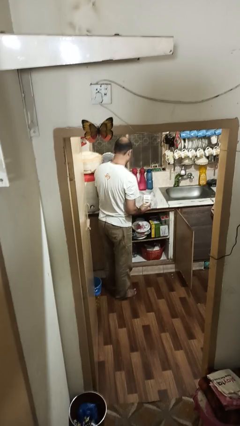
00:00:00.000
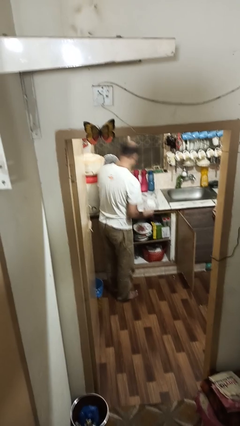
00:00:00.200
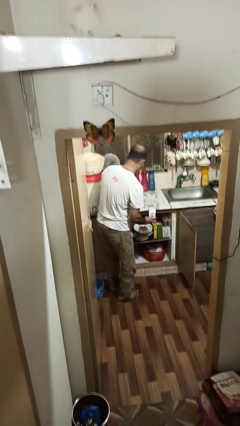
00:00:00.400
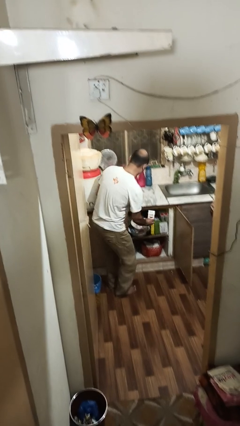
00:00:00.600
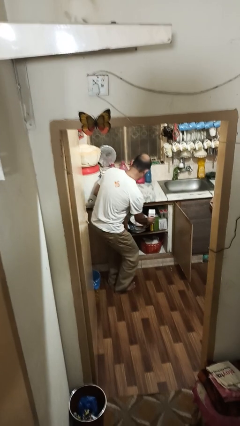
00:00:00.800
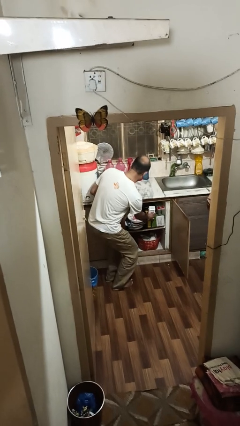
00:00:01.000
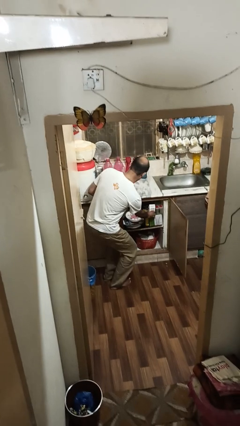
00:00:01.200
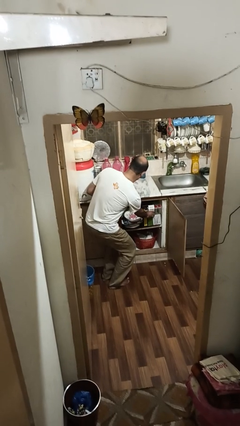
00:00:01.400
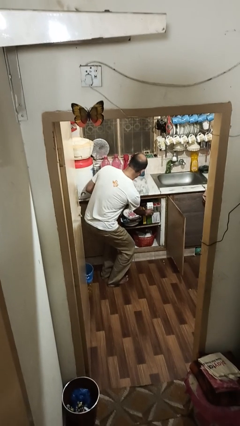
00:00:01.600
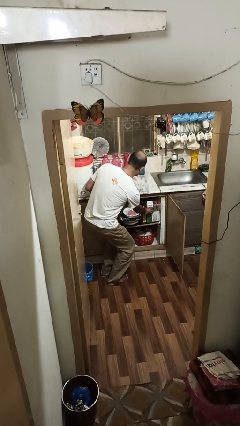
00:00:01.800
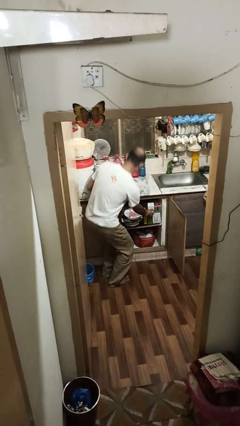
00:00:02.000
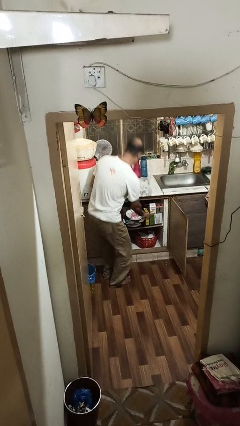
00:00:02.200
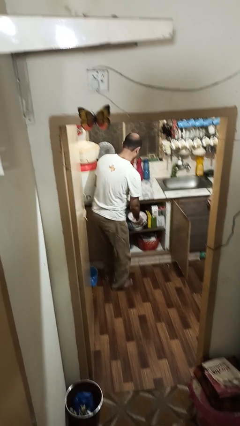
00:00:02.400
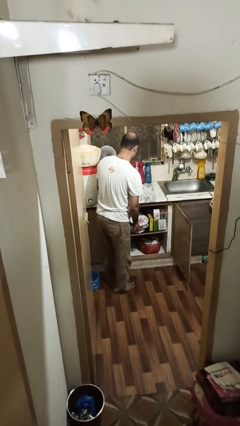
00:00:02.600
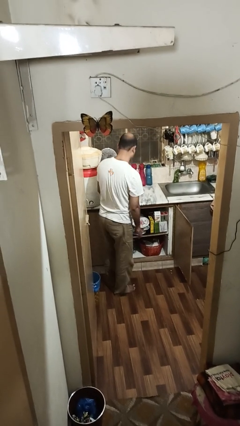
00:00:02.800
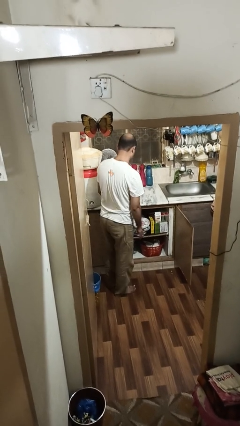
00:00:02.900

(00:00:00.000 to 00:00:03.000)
person puts object in cabinet

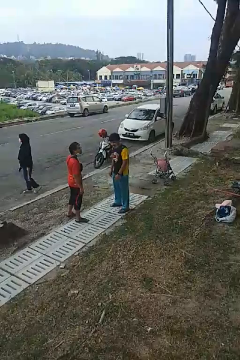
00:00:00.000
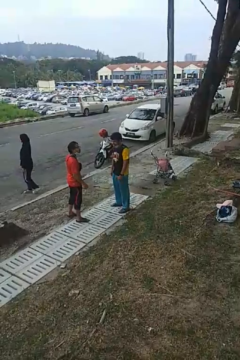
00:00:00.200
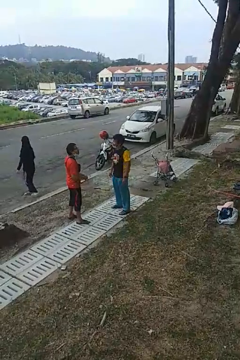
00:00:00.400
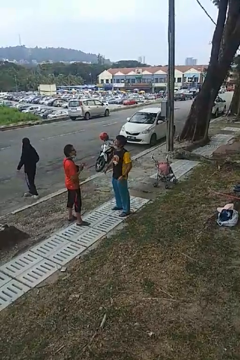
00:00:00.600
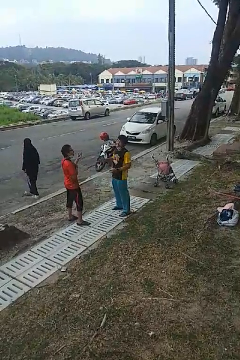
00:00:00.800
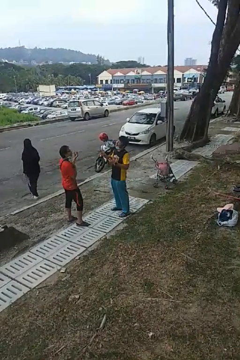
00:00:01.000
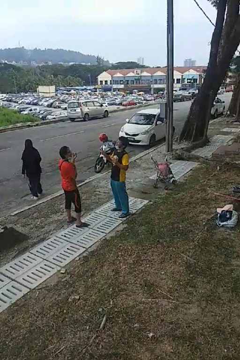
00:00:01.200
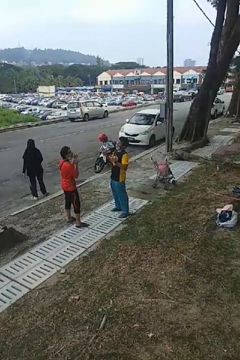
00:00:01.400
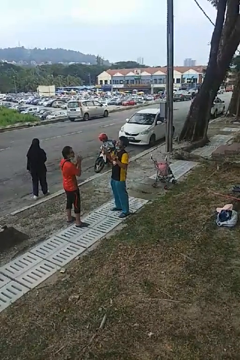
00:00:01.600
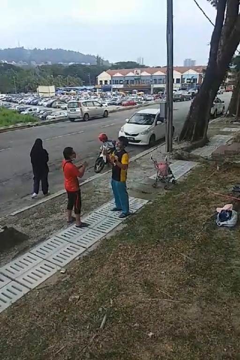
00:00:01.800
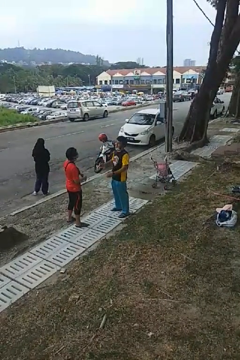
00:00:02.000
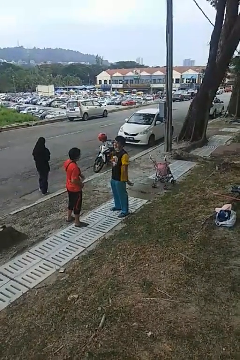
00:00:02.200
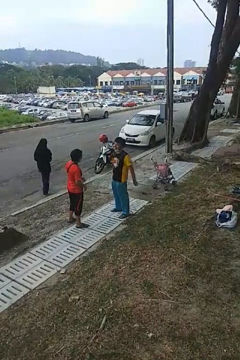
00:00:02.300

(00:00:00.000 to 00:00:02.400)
person laughs with person

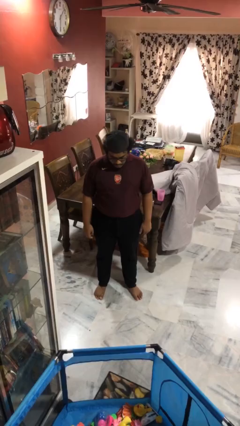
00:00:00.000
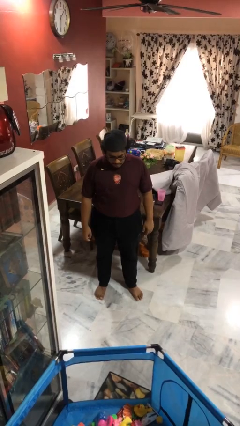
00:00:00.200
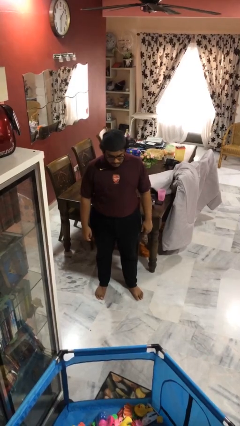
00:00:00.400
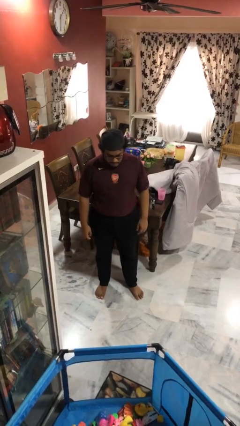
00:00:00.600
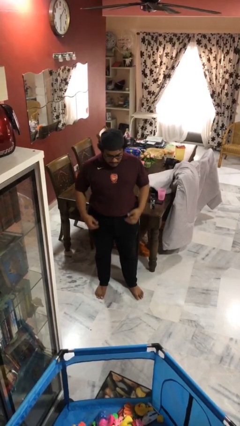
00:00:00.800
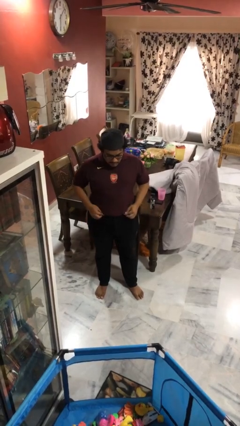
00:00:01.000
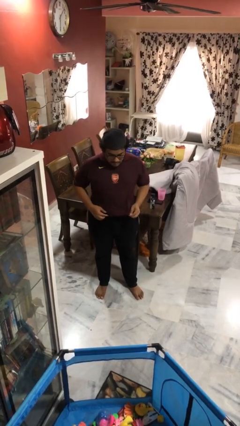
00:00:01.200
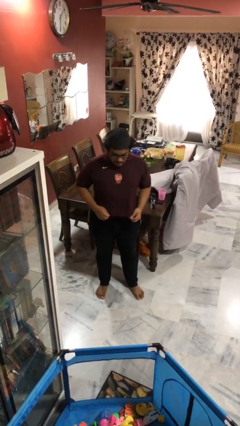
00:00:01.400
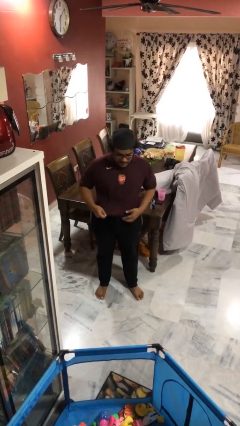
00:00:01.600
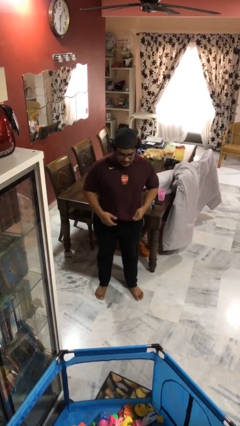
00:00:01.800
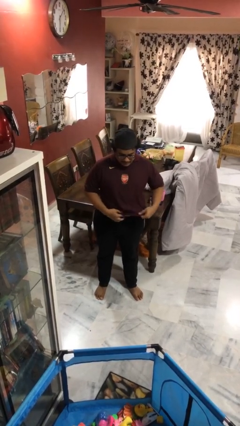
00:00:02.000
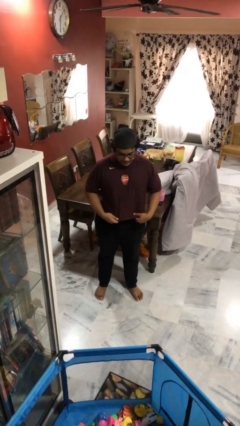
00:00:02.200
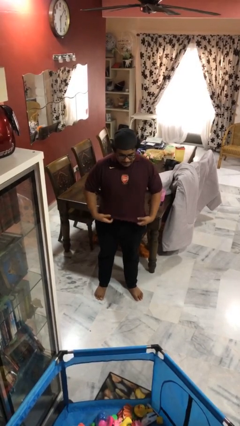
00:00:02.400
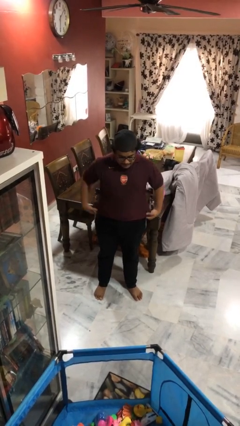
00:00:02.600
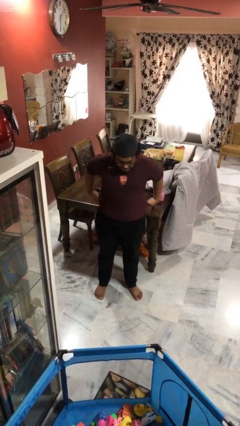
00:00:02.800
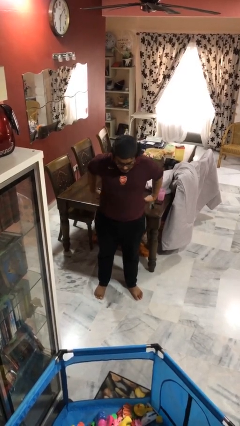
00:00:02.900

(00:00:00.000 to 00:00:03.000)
person untucks shirt

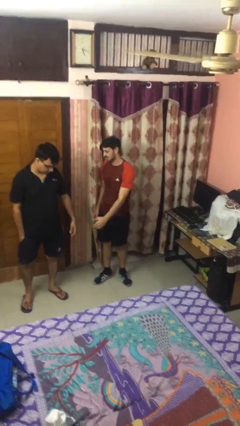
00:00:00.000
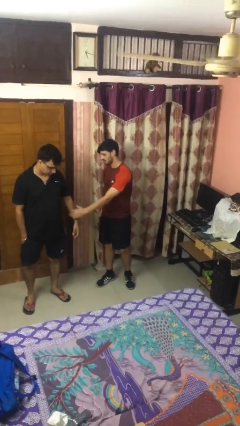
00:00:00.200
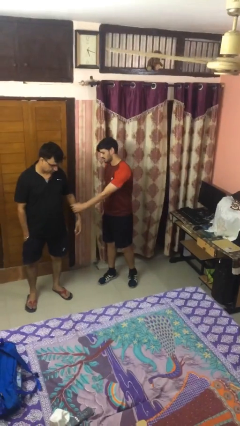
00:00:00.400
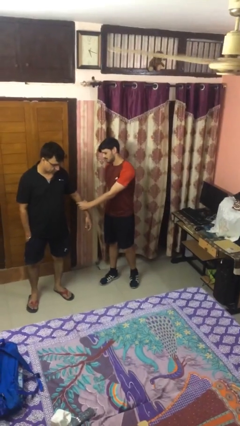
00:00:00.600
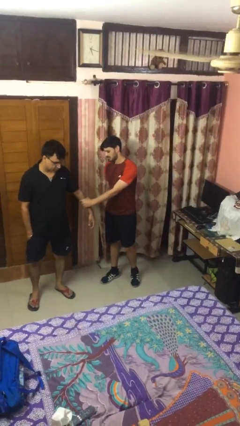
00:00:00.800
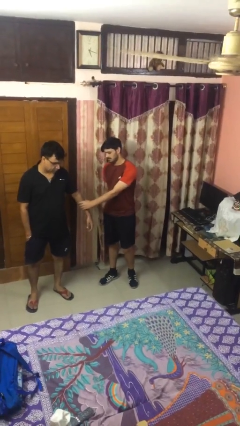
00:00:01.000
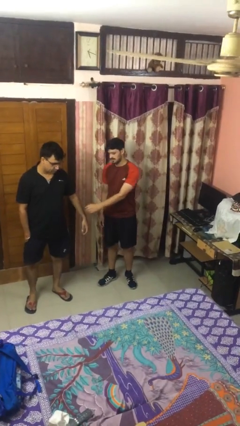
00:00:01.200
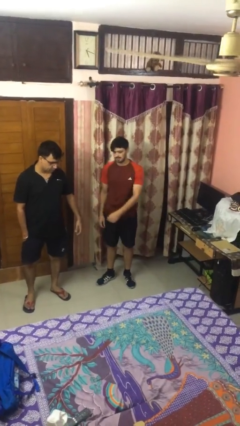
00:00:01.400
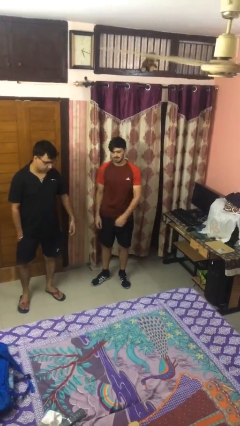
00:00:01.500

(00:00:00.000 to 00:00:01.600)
person grabs person by forearm

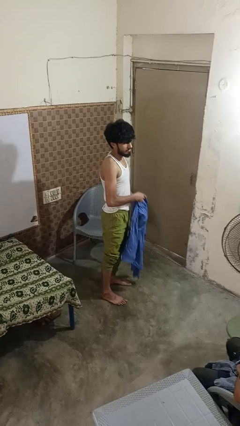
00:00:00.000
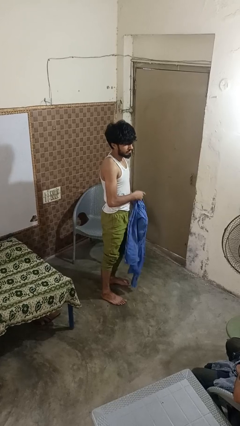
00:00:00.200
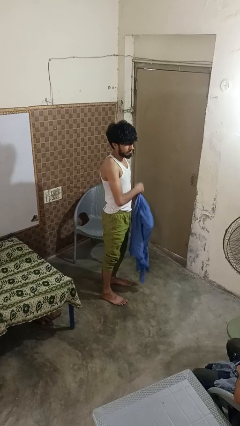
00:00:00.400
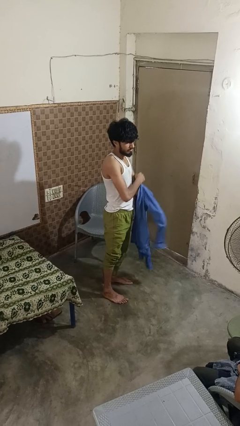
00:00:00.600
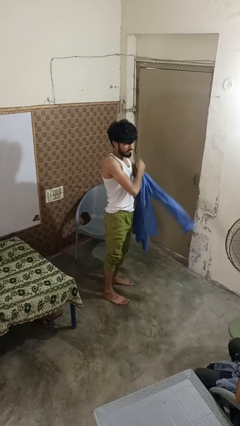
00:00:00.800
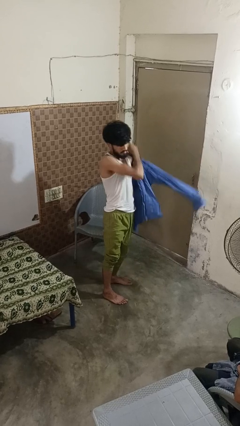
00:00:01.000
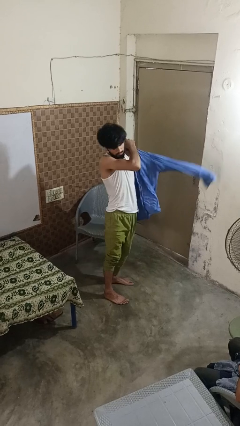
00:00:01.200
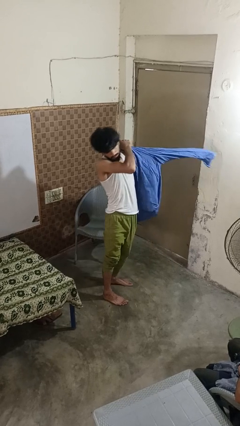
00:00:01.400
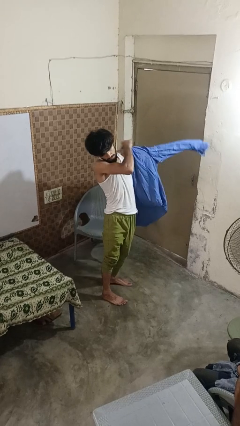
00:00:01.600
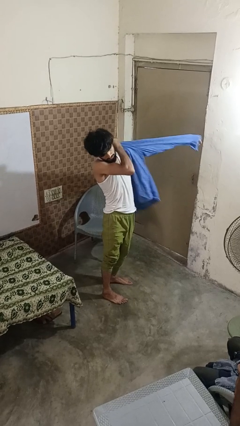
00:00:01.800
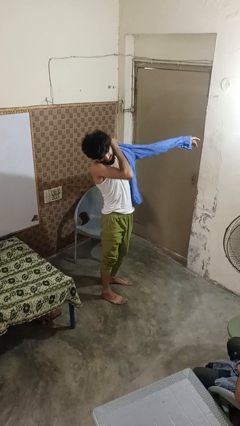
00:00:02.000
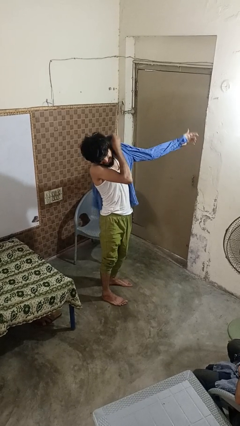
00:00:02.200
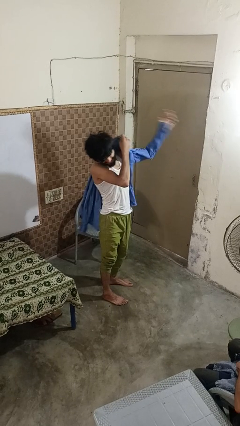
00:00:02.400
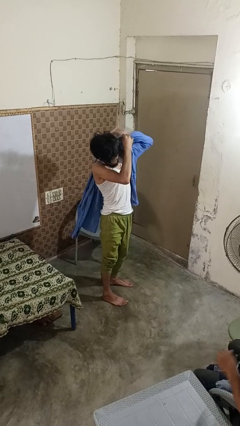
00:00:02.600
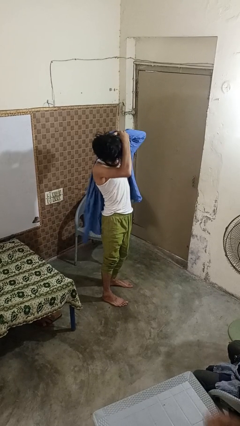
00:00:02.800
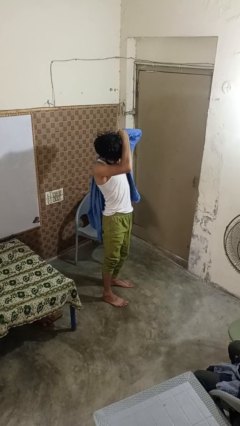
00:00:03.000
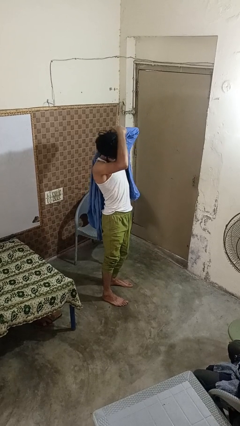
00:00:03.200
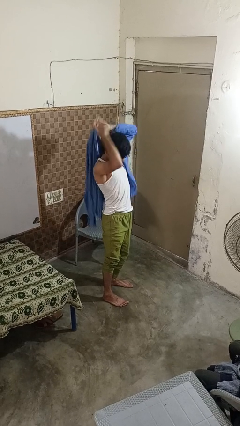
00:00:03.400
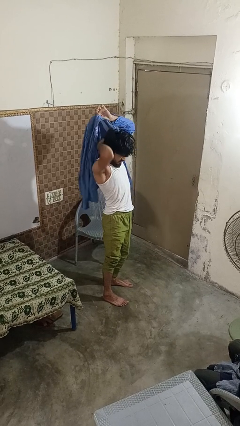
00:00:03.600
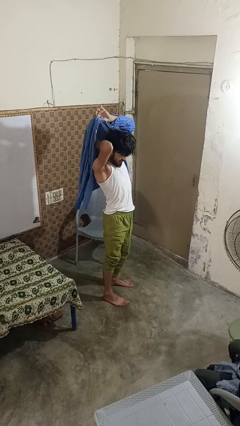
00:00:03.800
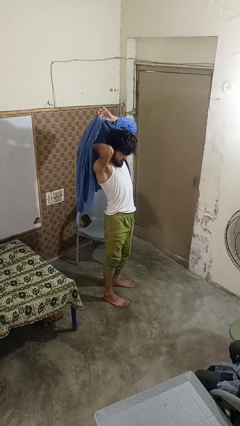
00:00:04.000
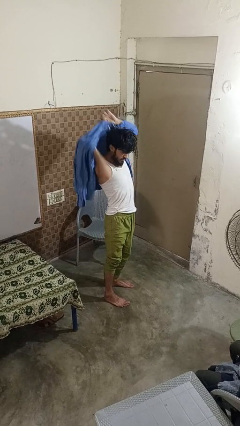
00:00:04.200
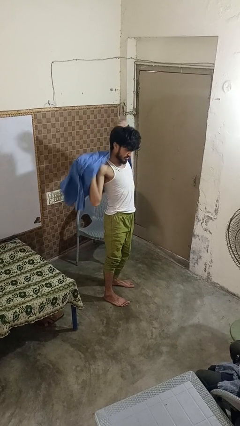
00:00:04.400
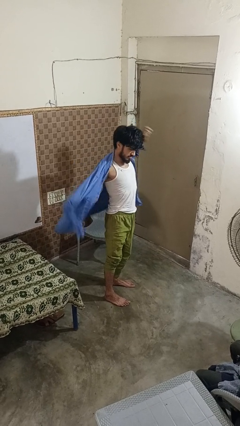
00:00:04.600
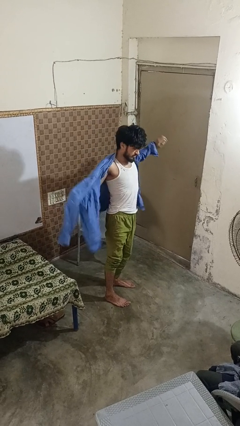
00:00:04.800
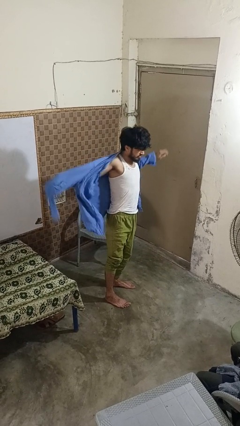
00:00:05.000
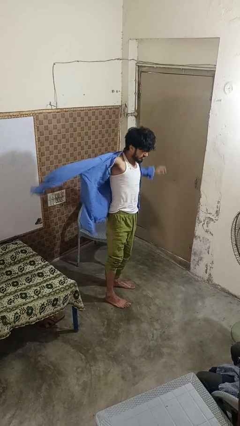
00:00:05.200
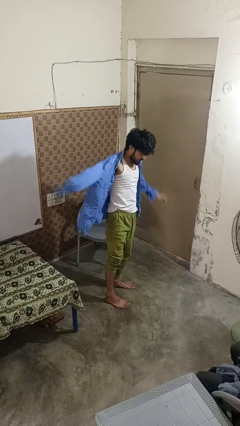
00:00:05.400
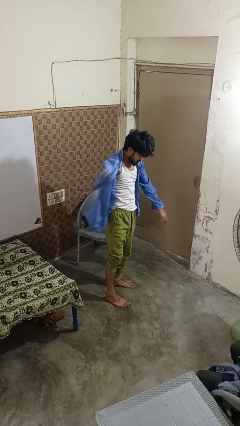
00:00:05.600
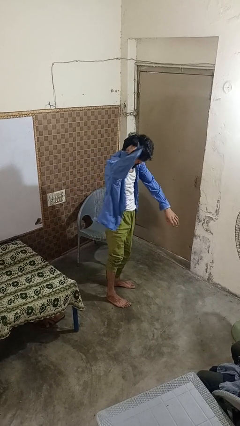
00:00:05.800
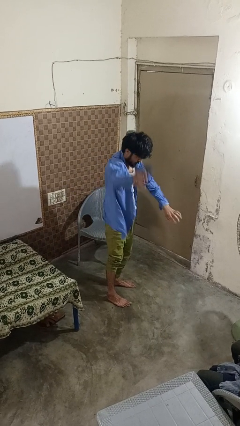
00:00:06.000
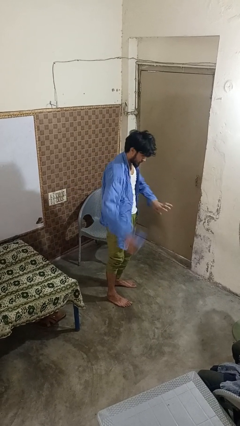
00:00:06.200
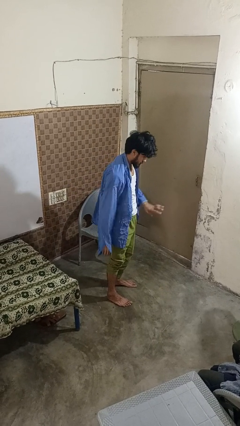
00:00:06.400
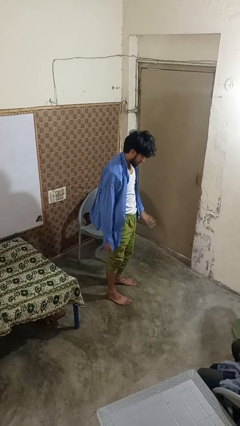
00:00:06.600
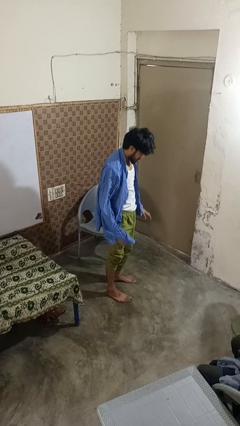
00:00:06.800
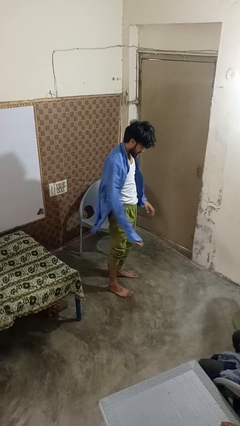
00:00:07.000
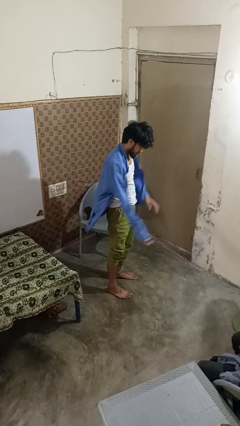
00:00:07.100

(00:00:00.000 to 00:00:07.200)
person puts on shirt

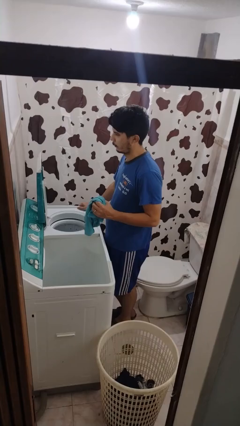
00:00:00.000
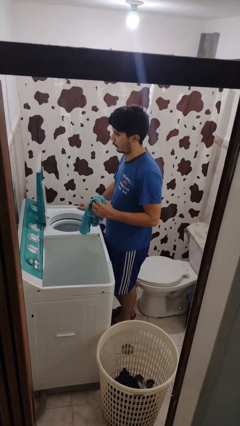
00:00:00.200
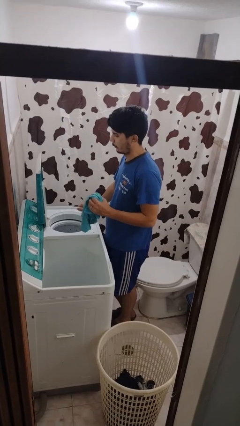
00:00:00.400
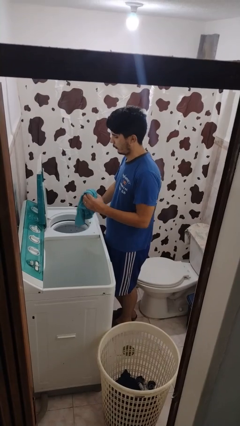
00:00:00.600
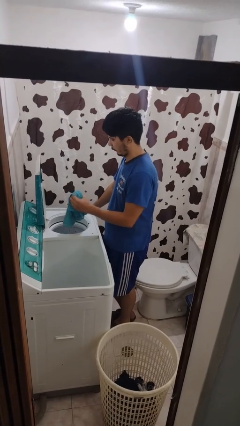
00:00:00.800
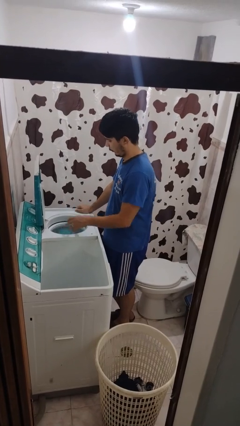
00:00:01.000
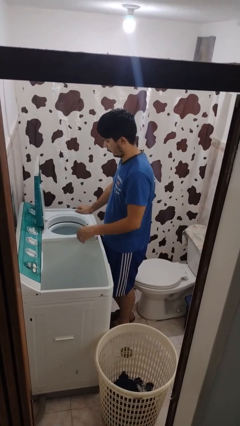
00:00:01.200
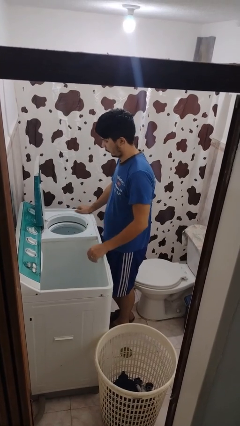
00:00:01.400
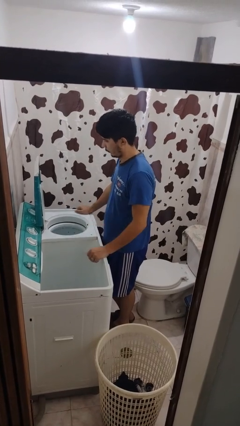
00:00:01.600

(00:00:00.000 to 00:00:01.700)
person loads dryer
